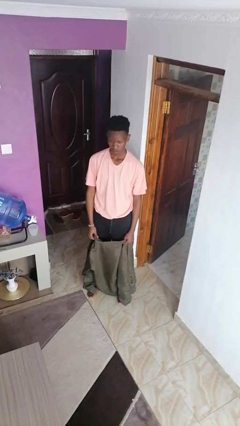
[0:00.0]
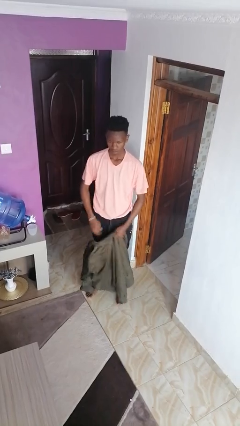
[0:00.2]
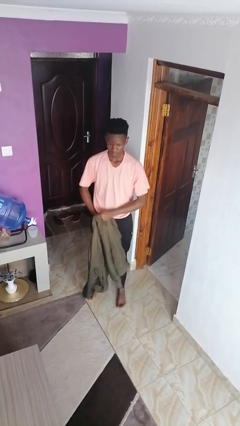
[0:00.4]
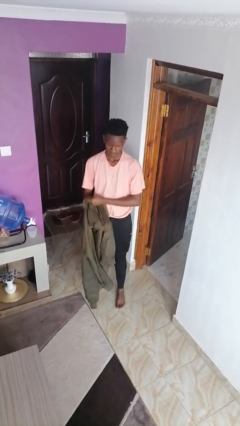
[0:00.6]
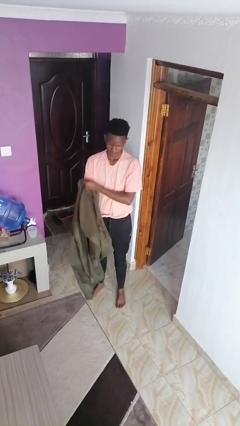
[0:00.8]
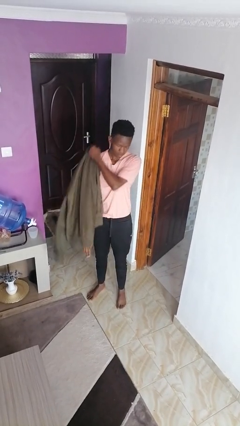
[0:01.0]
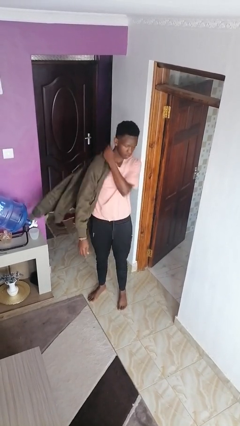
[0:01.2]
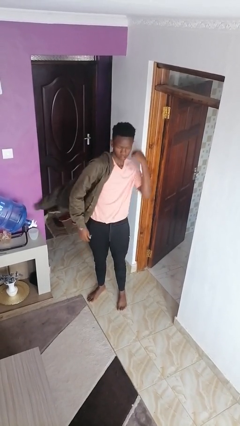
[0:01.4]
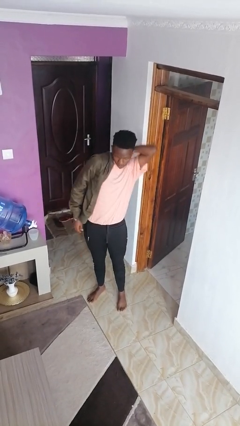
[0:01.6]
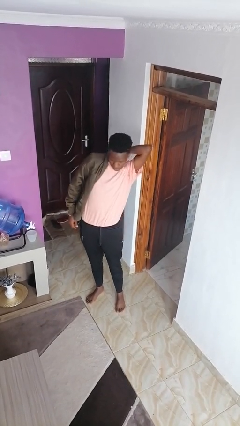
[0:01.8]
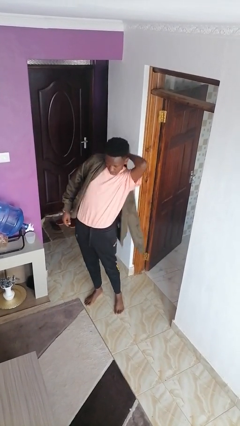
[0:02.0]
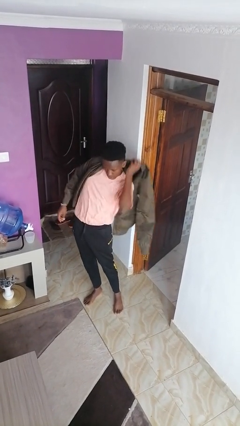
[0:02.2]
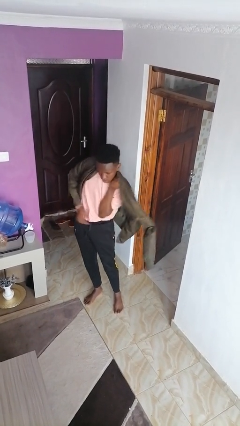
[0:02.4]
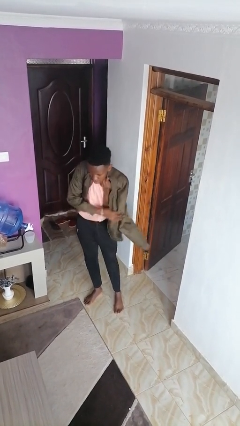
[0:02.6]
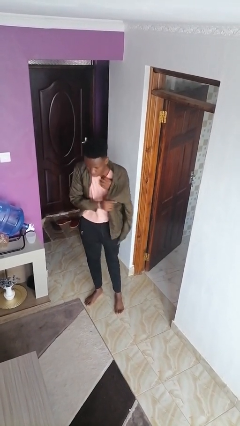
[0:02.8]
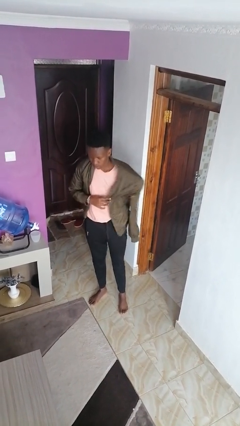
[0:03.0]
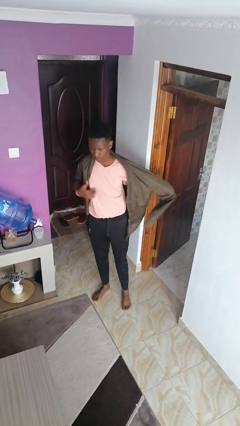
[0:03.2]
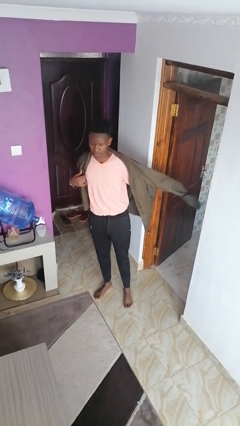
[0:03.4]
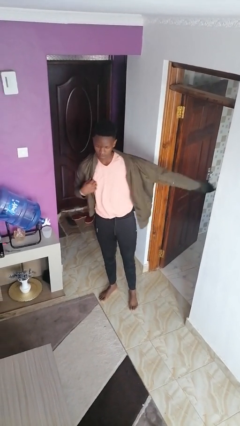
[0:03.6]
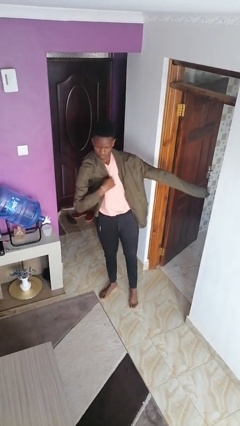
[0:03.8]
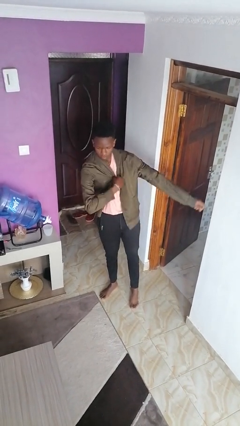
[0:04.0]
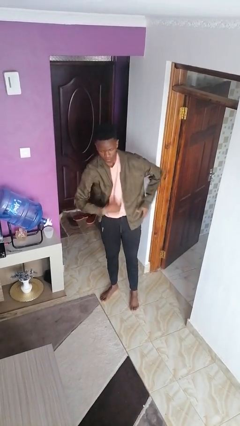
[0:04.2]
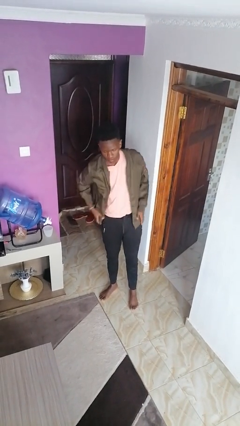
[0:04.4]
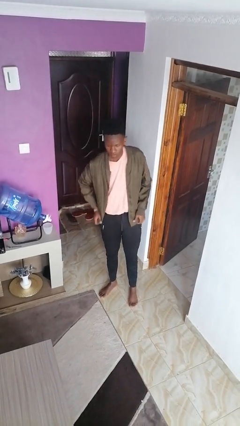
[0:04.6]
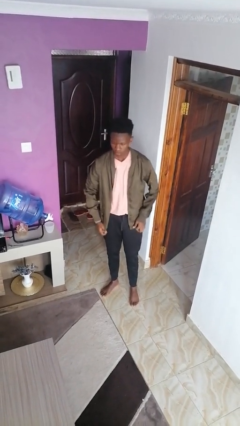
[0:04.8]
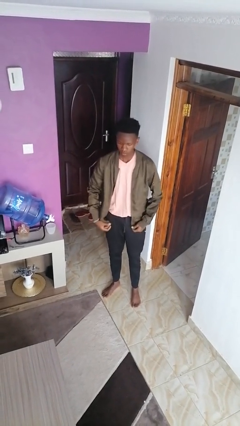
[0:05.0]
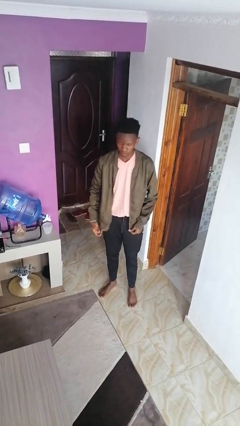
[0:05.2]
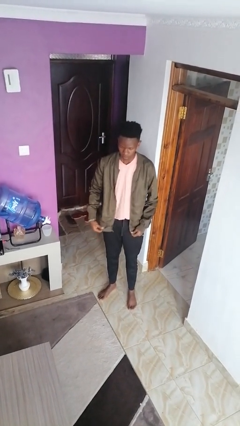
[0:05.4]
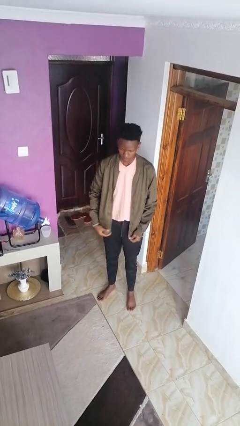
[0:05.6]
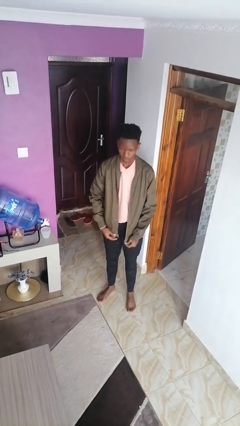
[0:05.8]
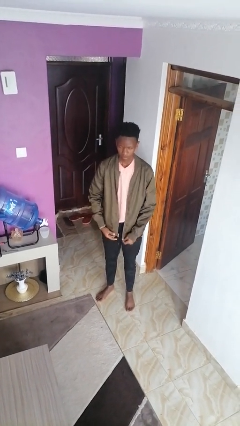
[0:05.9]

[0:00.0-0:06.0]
person puts on jacket

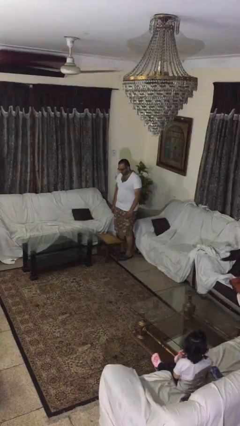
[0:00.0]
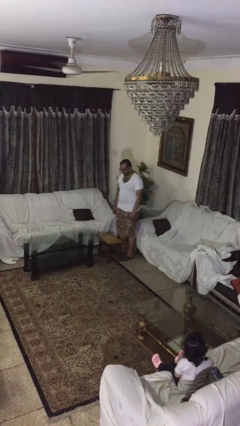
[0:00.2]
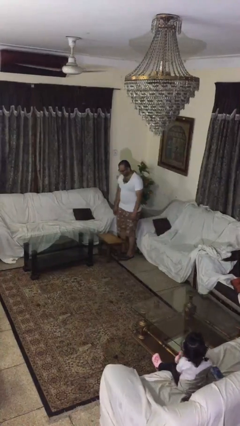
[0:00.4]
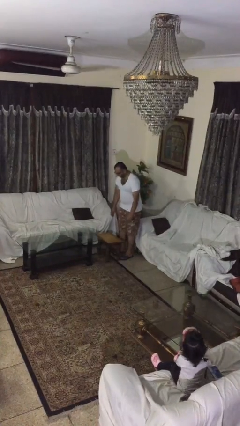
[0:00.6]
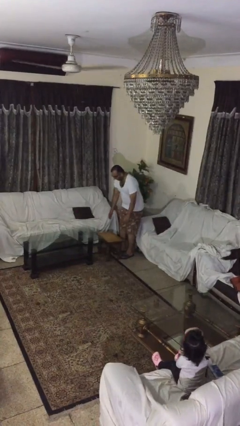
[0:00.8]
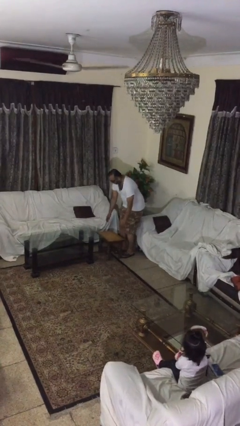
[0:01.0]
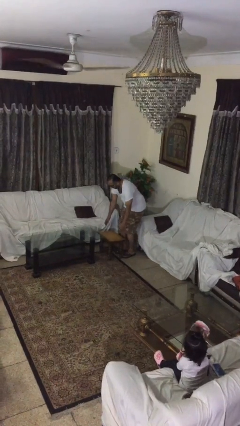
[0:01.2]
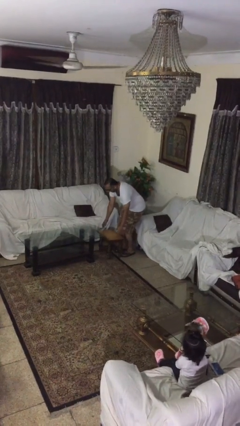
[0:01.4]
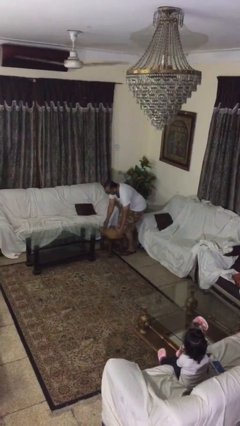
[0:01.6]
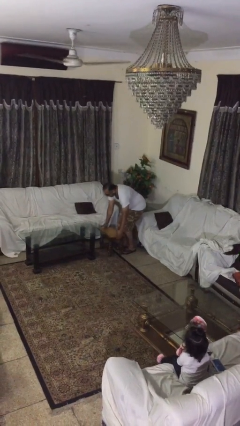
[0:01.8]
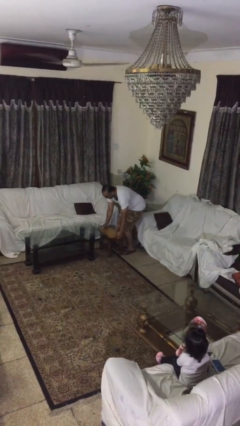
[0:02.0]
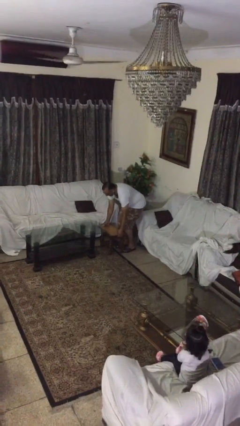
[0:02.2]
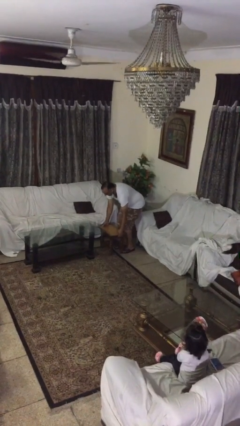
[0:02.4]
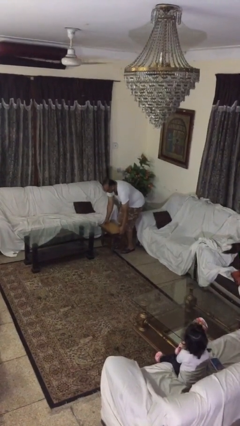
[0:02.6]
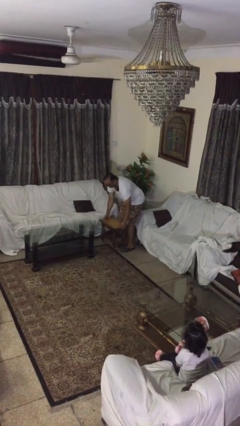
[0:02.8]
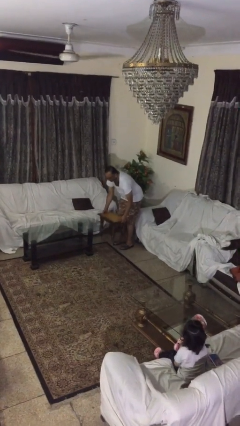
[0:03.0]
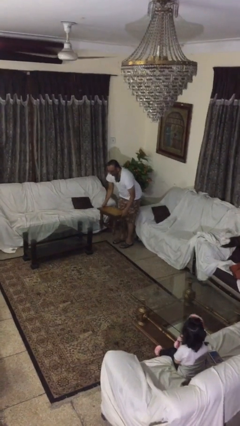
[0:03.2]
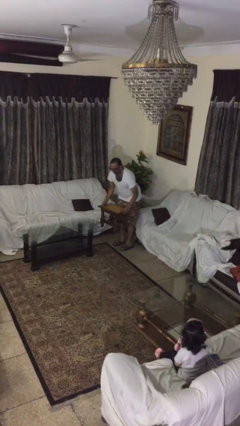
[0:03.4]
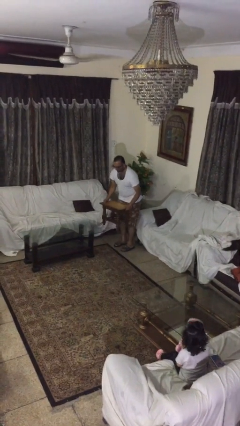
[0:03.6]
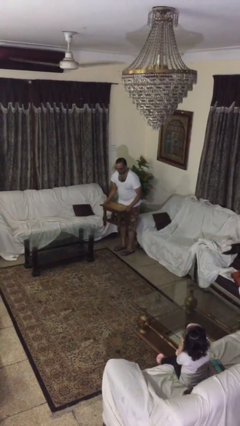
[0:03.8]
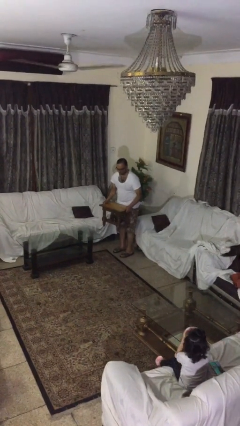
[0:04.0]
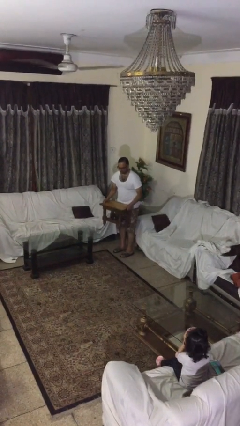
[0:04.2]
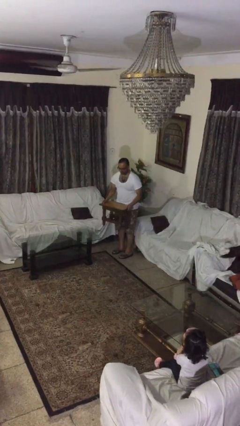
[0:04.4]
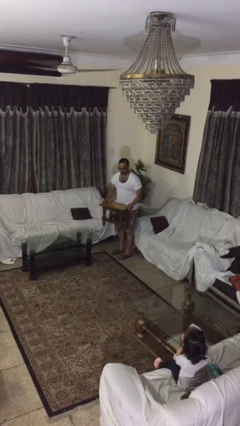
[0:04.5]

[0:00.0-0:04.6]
person picks up object from floor

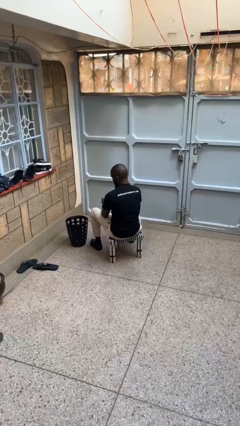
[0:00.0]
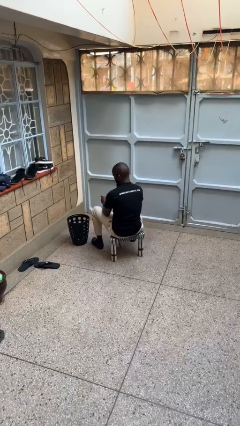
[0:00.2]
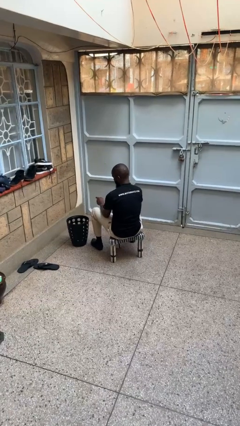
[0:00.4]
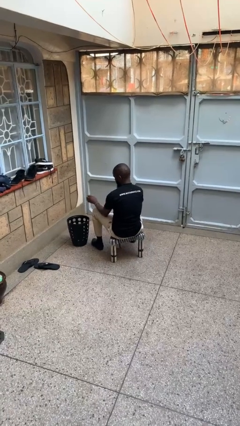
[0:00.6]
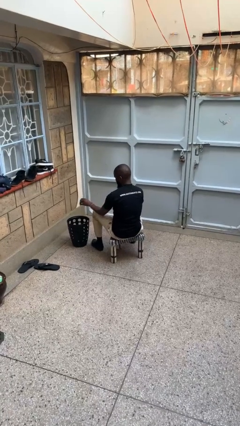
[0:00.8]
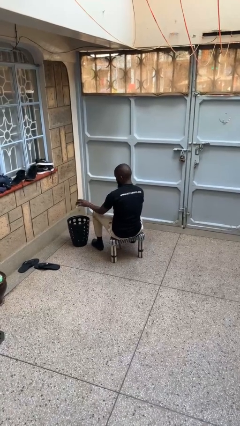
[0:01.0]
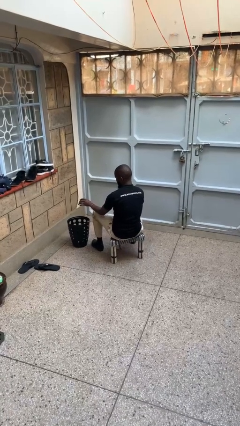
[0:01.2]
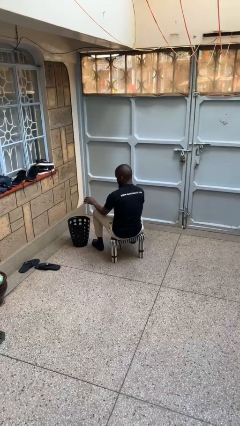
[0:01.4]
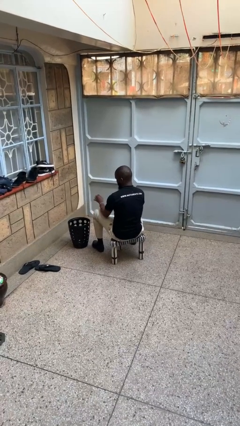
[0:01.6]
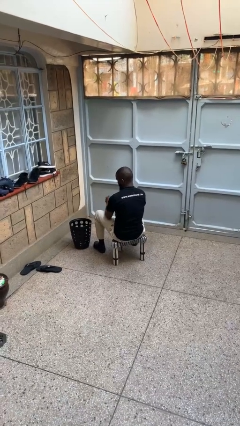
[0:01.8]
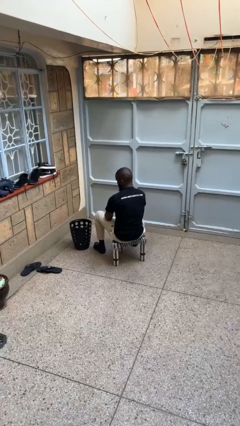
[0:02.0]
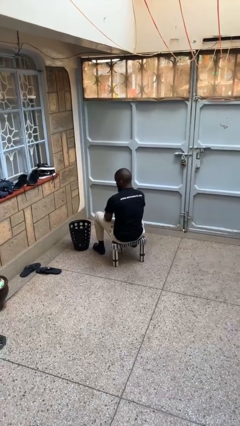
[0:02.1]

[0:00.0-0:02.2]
person discards trash

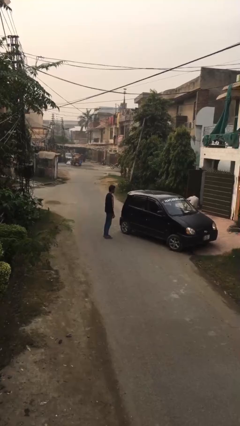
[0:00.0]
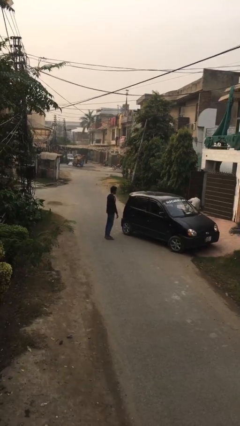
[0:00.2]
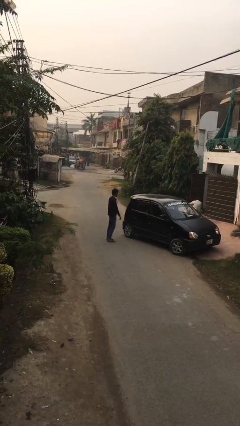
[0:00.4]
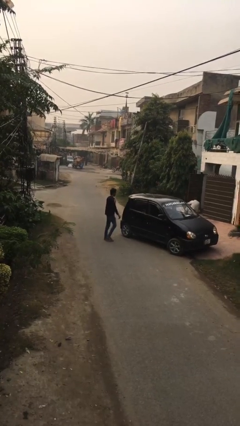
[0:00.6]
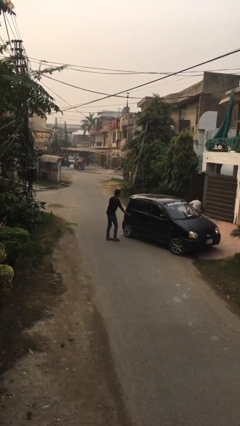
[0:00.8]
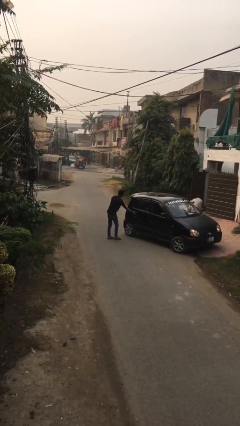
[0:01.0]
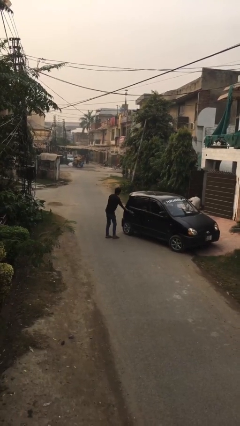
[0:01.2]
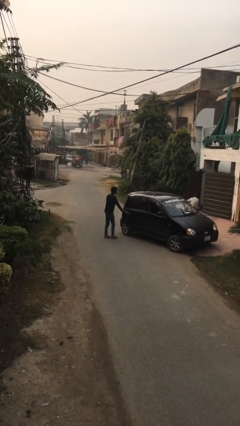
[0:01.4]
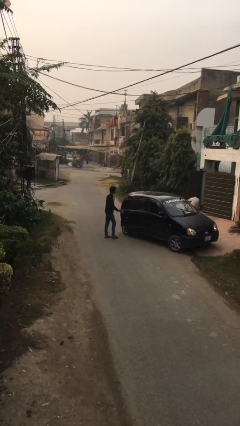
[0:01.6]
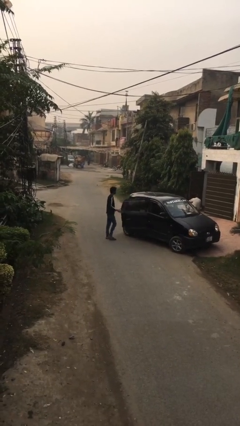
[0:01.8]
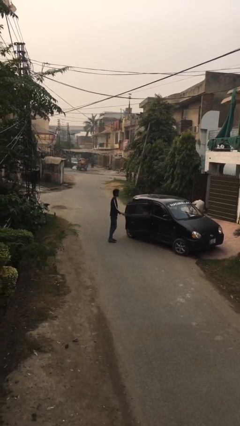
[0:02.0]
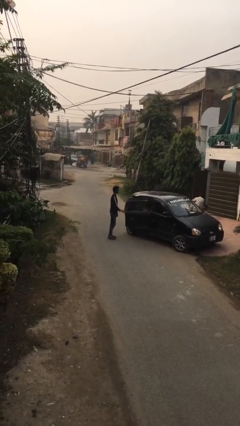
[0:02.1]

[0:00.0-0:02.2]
person opens car door

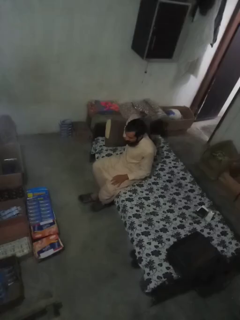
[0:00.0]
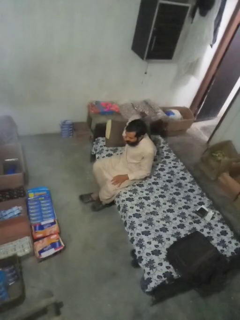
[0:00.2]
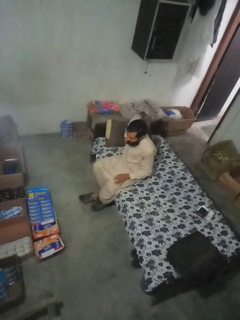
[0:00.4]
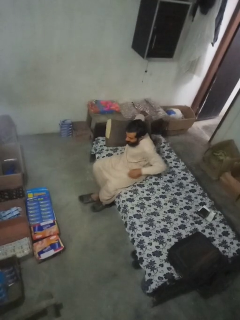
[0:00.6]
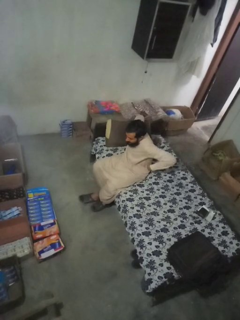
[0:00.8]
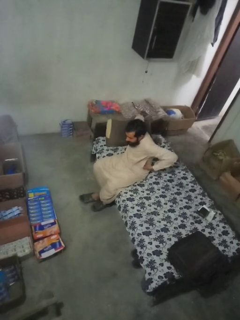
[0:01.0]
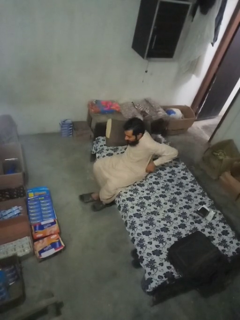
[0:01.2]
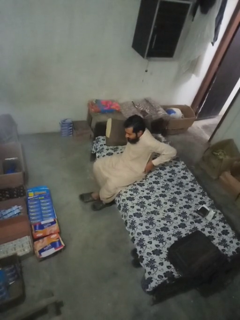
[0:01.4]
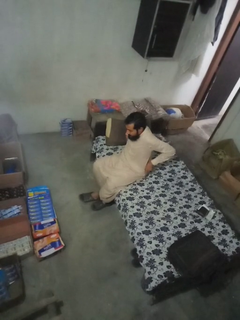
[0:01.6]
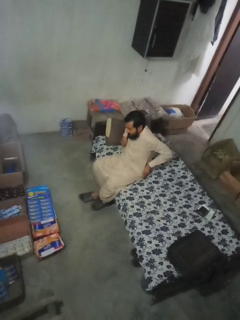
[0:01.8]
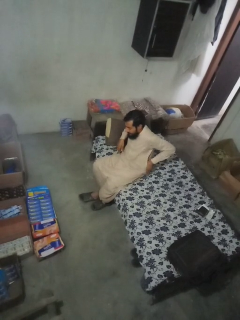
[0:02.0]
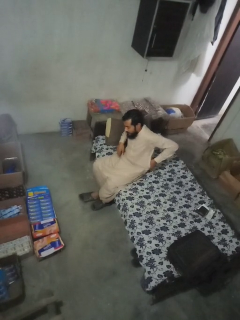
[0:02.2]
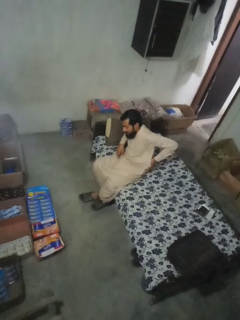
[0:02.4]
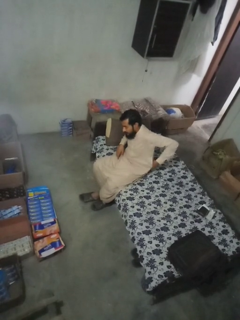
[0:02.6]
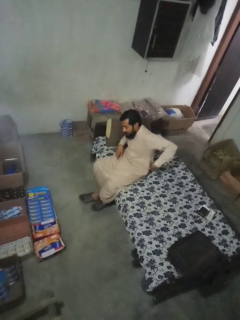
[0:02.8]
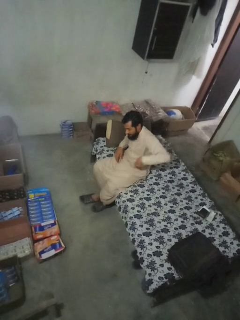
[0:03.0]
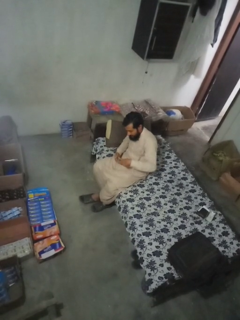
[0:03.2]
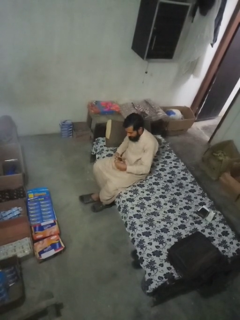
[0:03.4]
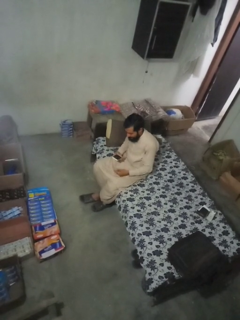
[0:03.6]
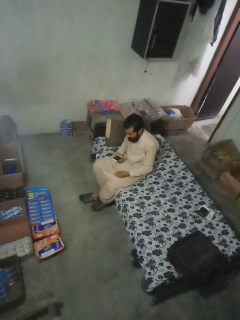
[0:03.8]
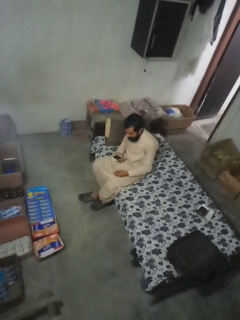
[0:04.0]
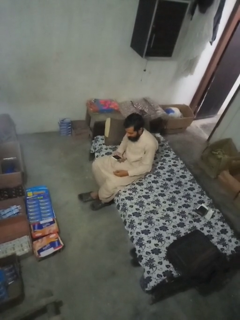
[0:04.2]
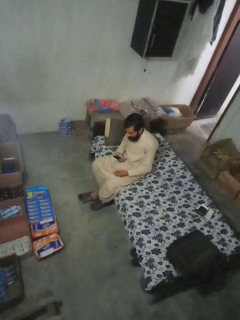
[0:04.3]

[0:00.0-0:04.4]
person takes phone from pocket
